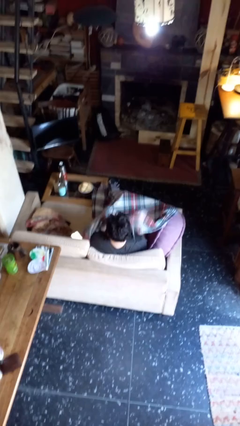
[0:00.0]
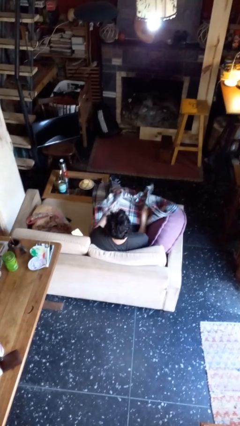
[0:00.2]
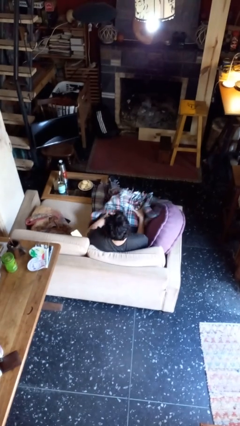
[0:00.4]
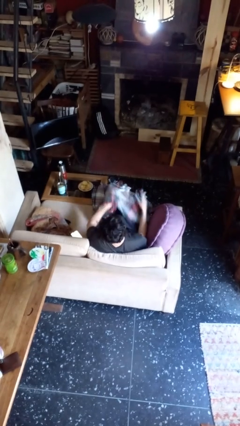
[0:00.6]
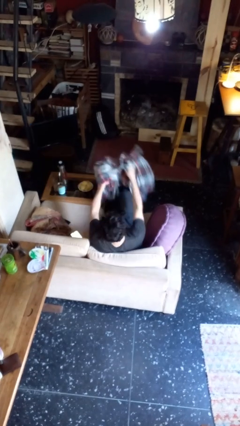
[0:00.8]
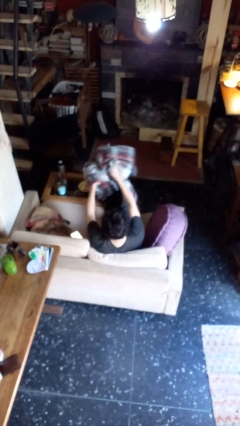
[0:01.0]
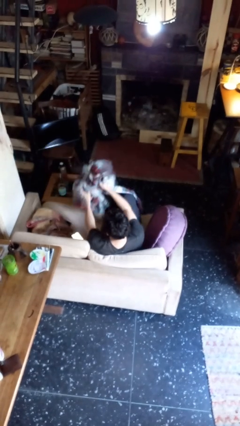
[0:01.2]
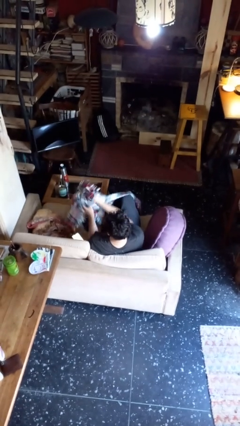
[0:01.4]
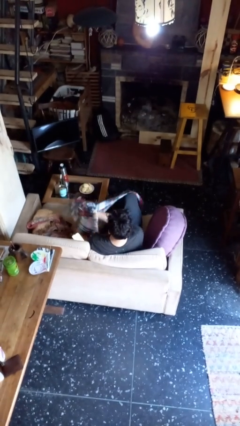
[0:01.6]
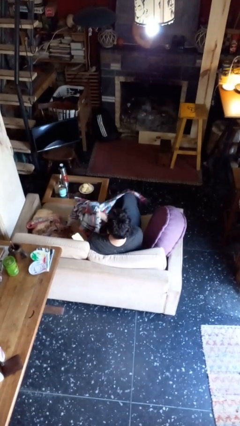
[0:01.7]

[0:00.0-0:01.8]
person uncovers with blanket

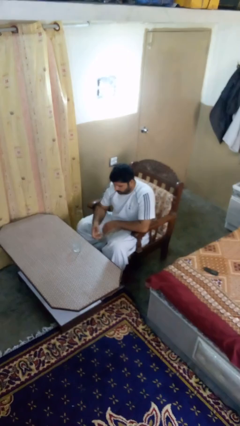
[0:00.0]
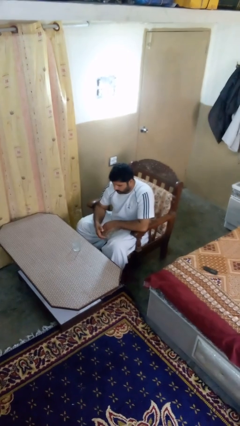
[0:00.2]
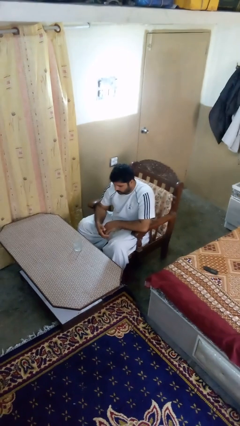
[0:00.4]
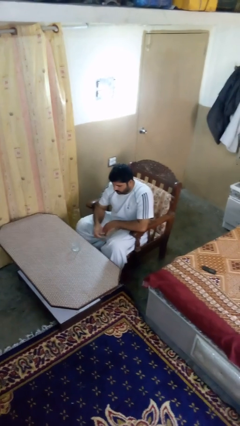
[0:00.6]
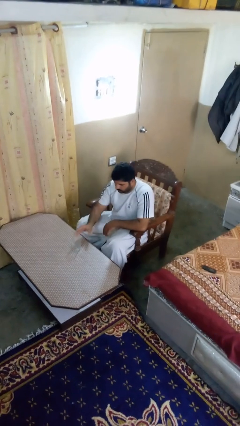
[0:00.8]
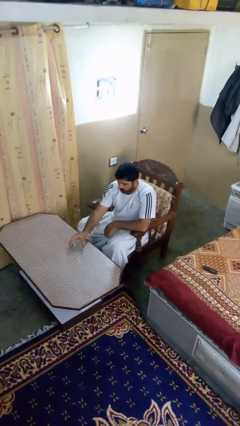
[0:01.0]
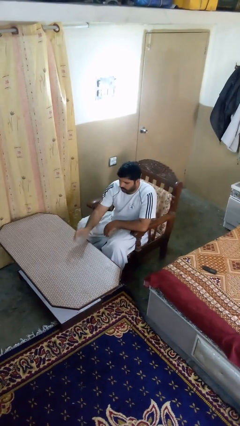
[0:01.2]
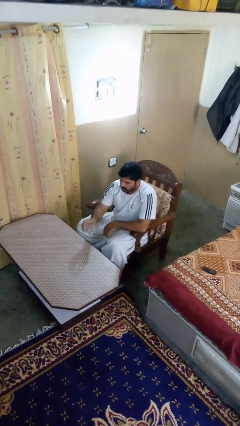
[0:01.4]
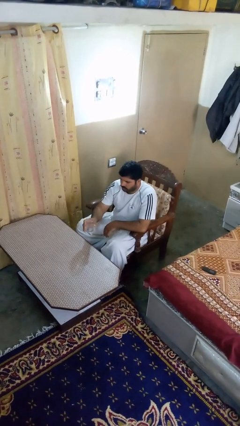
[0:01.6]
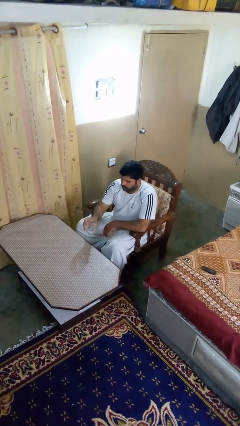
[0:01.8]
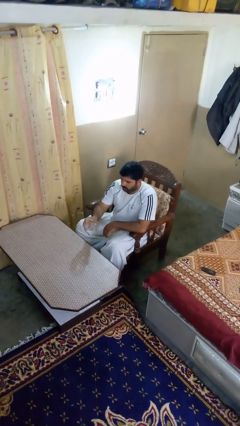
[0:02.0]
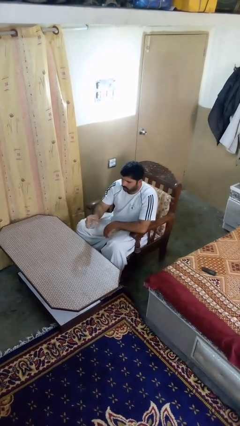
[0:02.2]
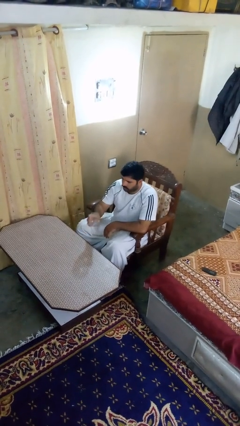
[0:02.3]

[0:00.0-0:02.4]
person picks up object from table

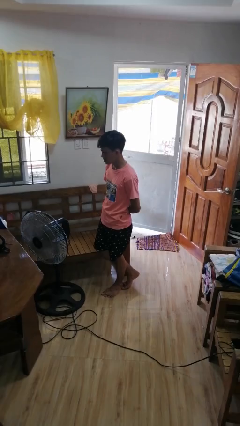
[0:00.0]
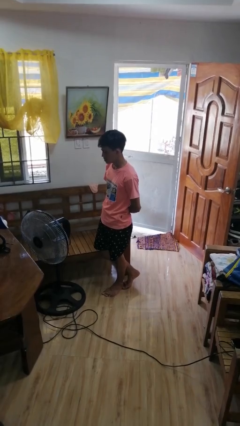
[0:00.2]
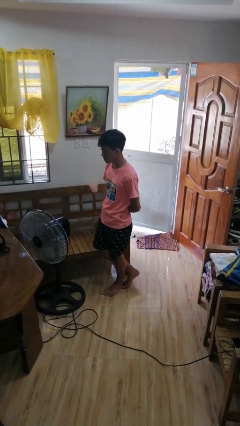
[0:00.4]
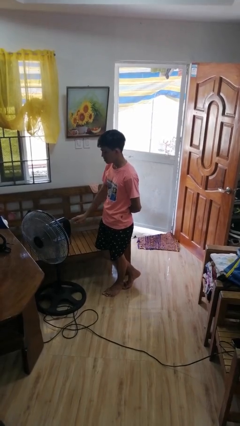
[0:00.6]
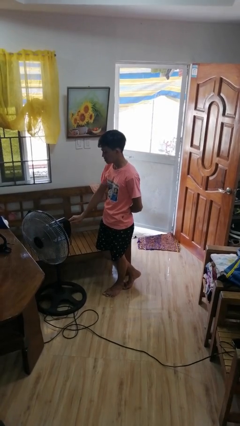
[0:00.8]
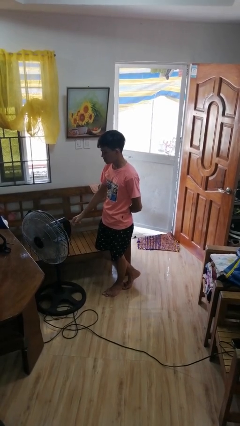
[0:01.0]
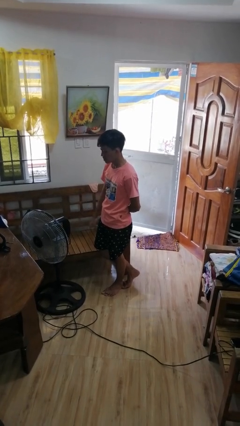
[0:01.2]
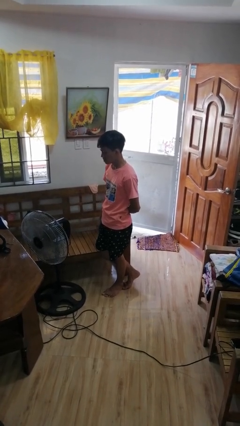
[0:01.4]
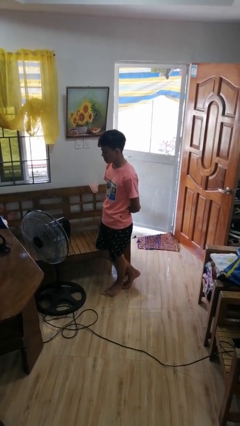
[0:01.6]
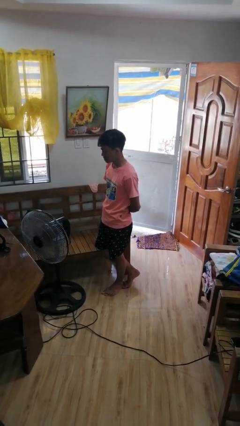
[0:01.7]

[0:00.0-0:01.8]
person turns off fan

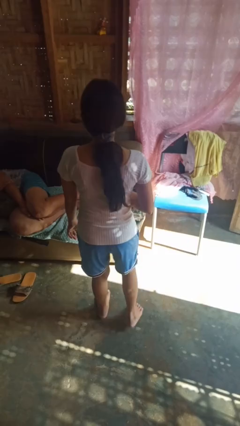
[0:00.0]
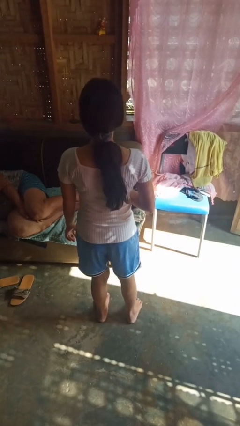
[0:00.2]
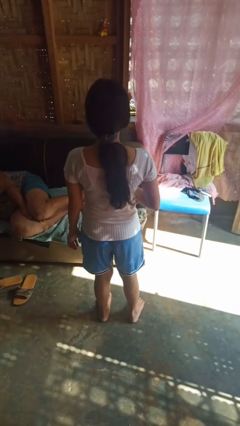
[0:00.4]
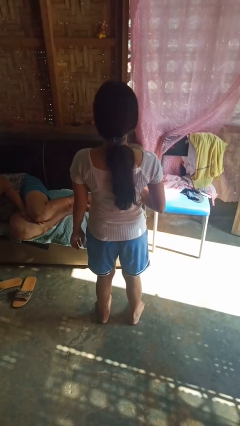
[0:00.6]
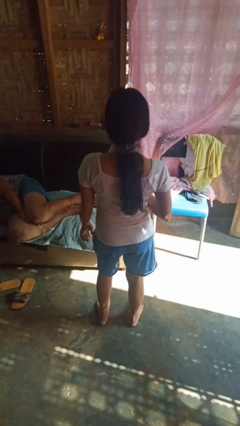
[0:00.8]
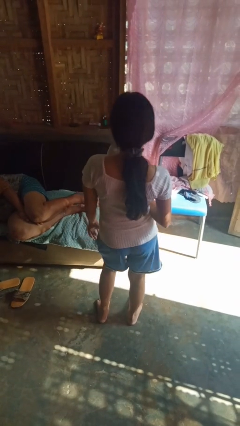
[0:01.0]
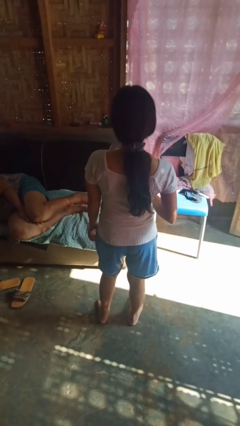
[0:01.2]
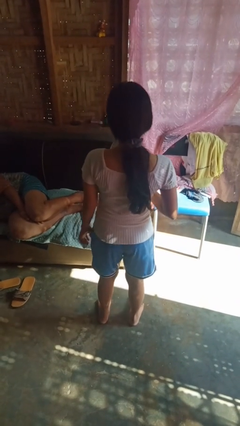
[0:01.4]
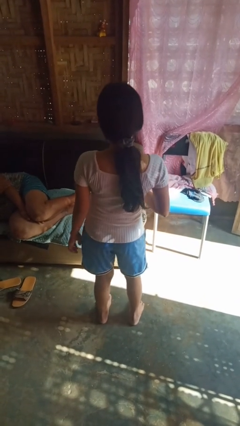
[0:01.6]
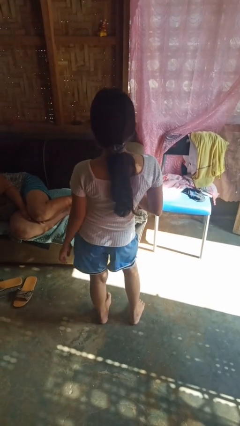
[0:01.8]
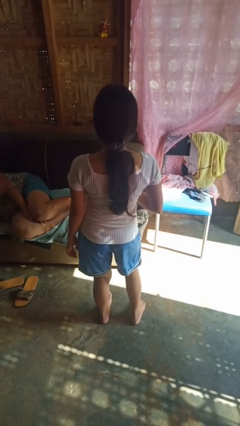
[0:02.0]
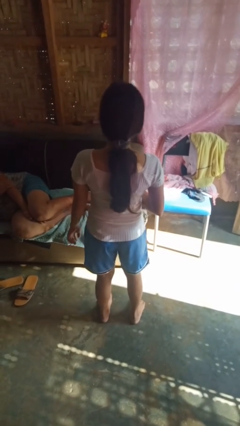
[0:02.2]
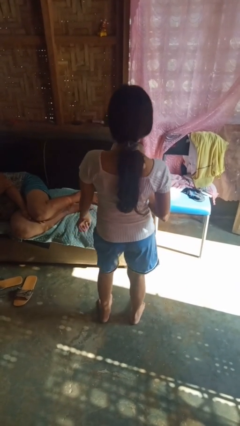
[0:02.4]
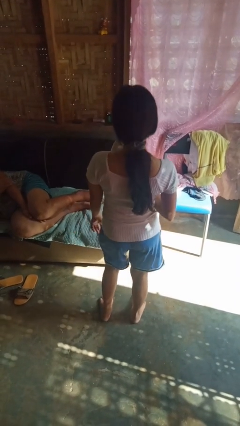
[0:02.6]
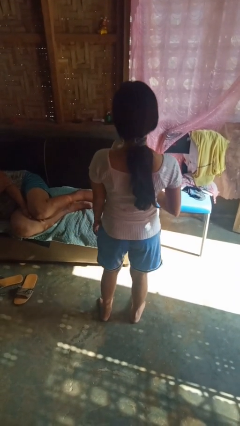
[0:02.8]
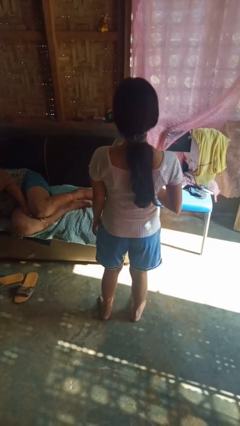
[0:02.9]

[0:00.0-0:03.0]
person wiggles hips

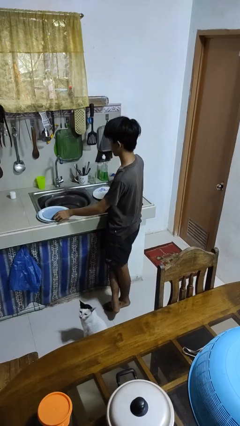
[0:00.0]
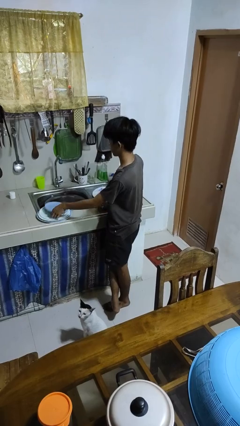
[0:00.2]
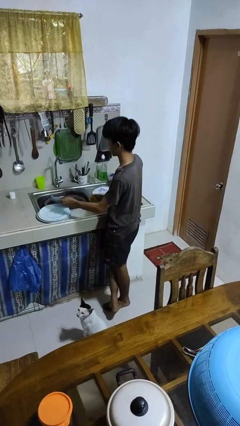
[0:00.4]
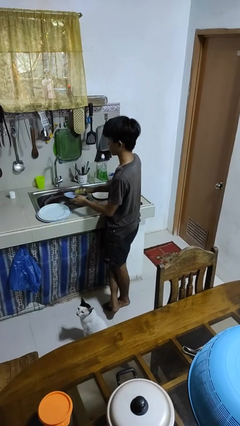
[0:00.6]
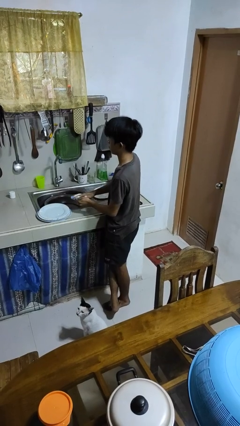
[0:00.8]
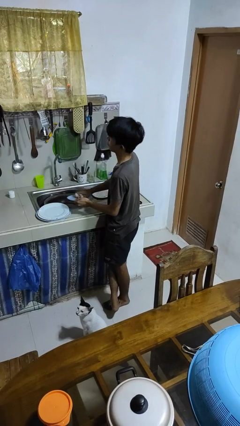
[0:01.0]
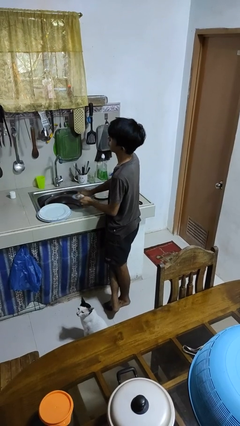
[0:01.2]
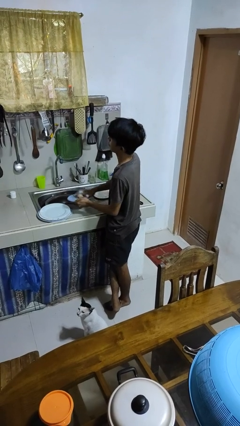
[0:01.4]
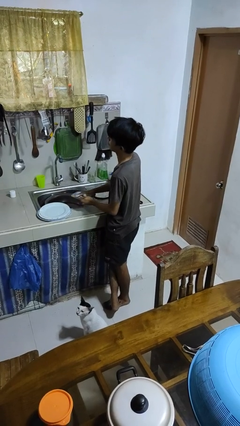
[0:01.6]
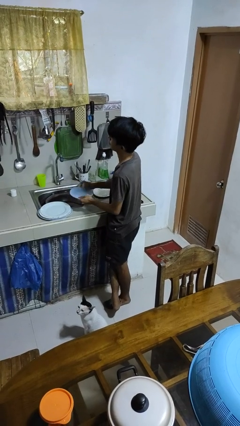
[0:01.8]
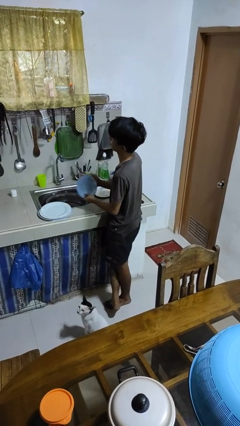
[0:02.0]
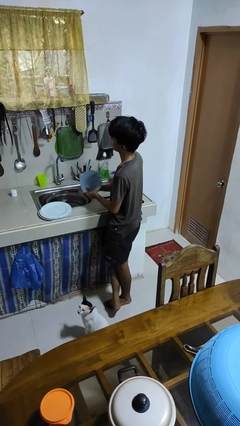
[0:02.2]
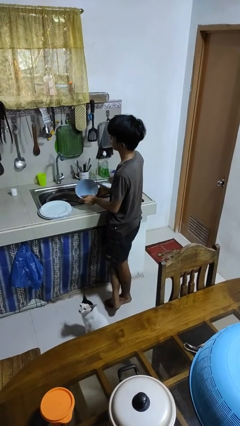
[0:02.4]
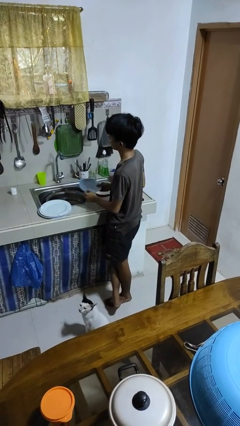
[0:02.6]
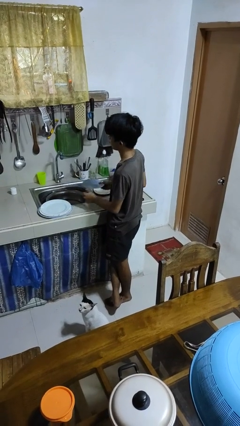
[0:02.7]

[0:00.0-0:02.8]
person dries hands with towel

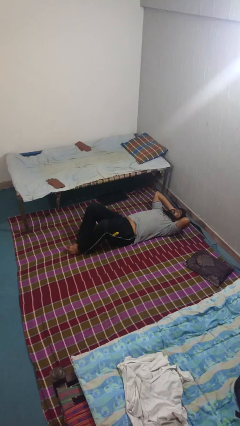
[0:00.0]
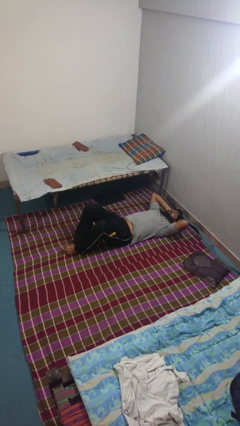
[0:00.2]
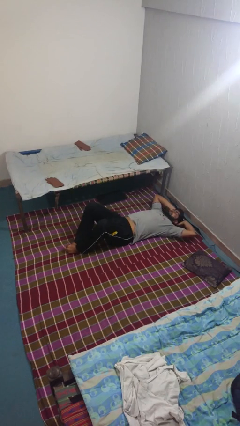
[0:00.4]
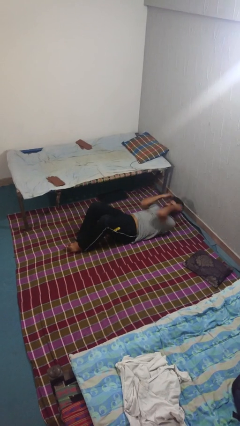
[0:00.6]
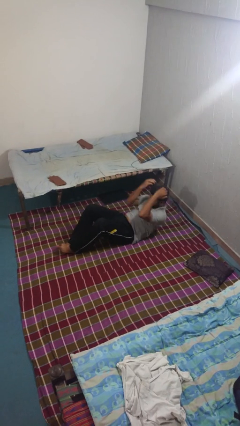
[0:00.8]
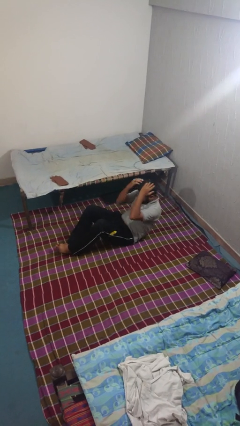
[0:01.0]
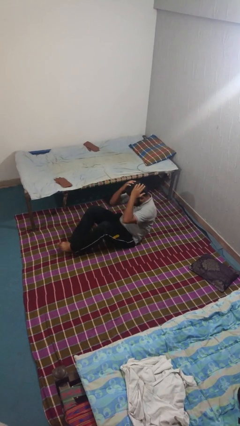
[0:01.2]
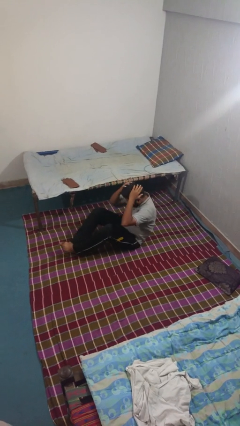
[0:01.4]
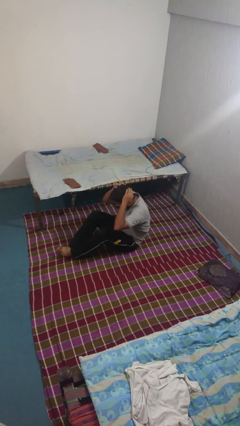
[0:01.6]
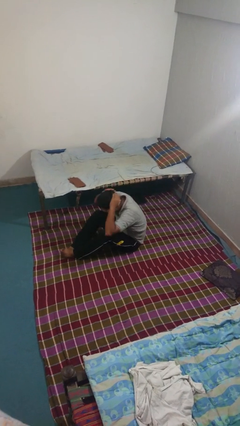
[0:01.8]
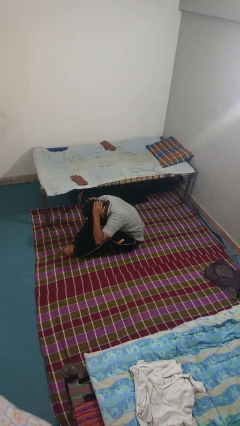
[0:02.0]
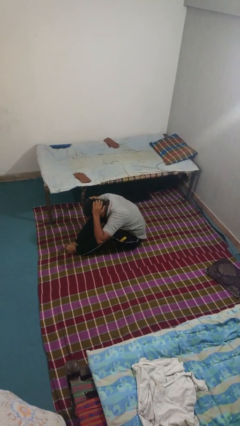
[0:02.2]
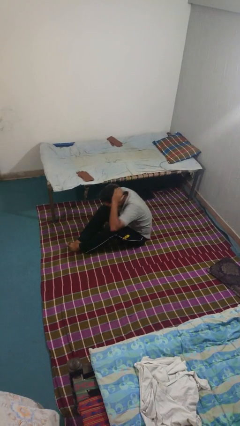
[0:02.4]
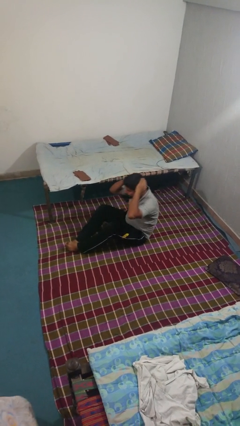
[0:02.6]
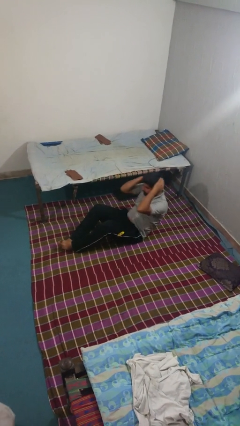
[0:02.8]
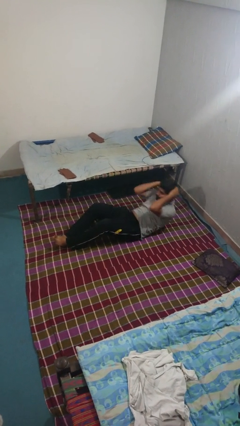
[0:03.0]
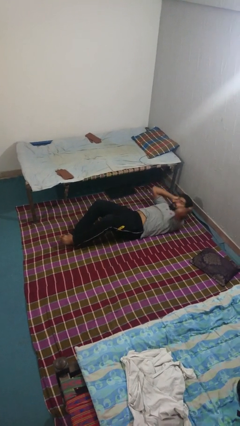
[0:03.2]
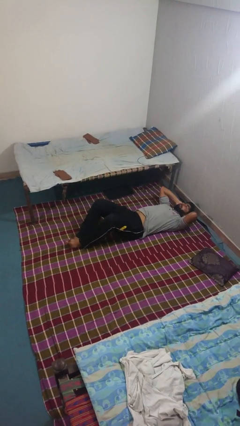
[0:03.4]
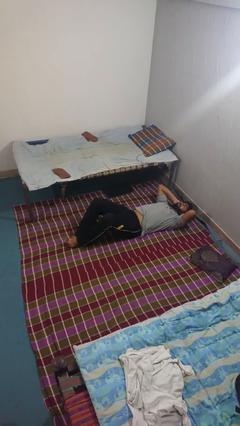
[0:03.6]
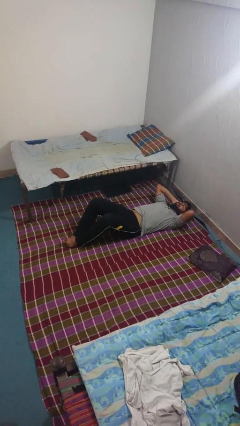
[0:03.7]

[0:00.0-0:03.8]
person exercises with situp

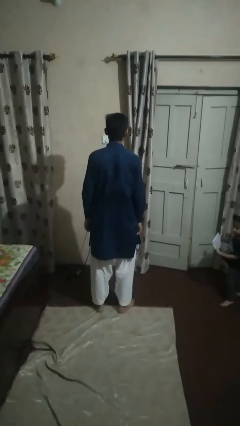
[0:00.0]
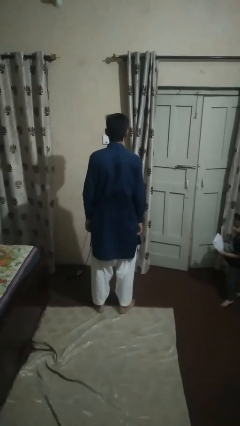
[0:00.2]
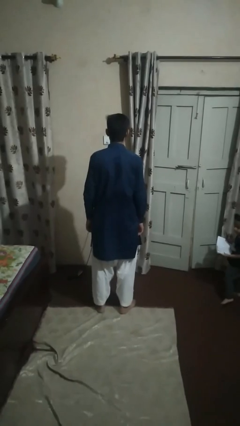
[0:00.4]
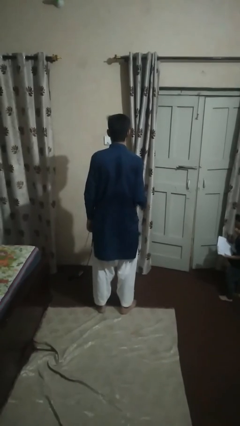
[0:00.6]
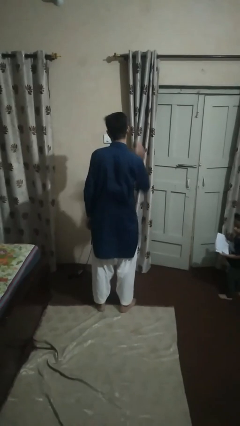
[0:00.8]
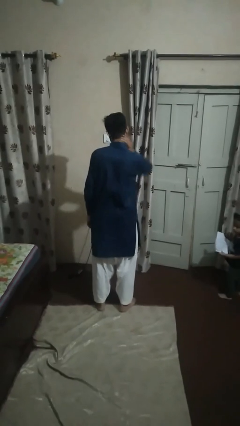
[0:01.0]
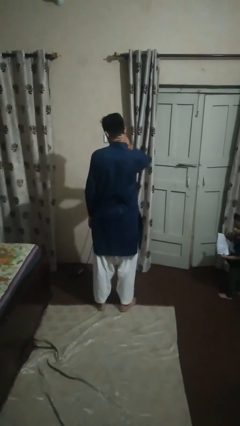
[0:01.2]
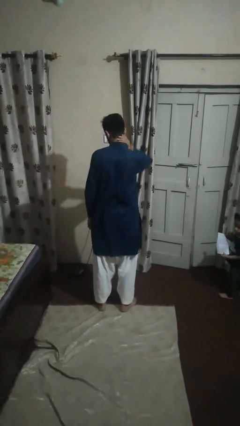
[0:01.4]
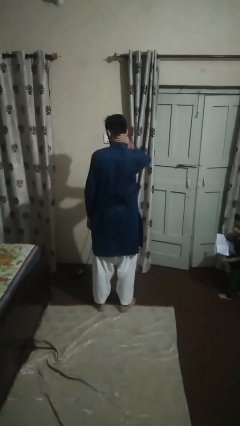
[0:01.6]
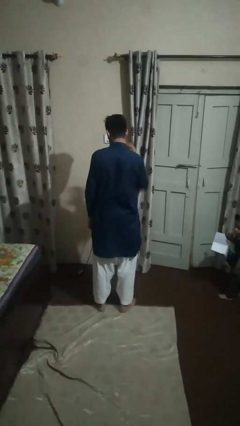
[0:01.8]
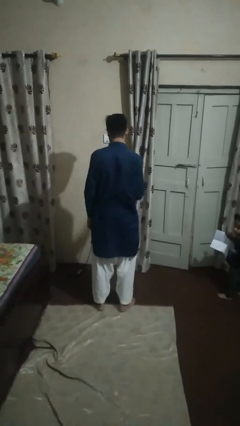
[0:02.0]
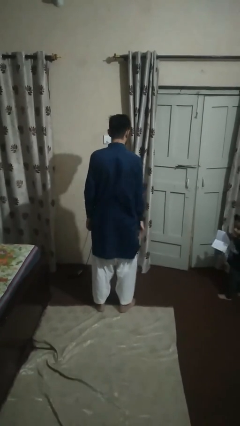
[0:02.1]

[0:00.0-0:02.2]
person rubs neck
